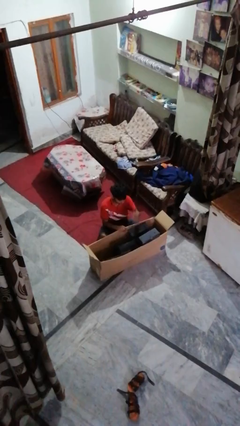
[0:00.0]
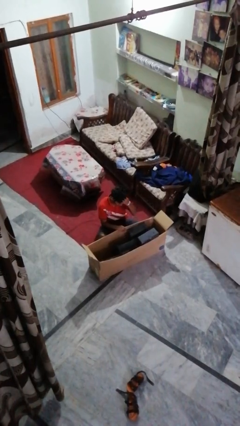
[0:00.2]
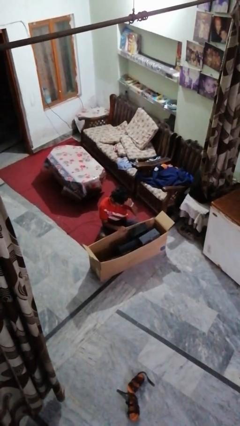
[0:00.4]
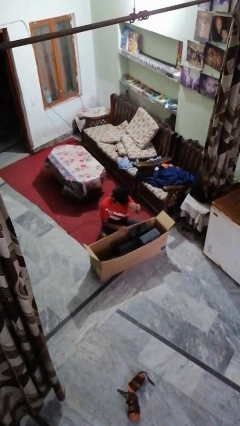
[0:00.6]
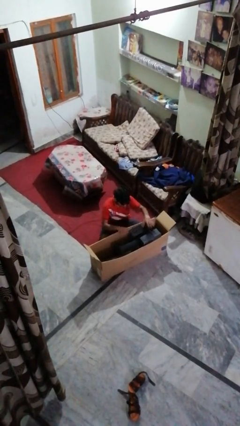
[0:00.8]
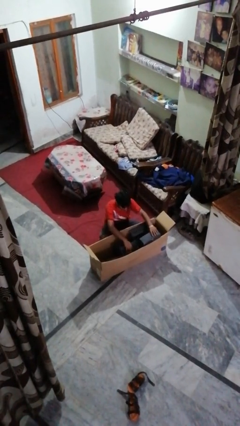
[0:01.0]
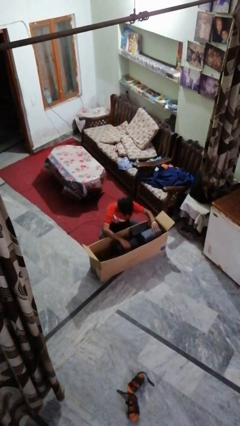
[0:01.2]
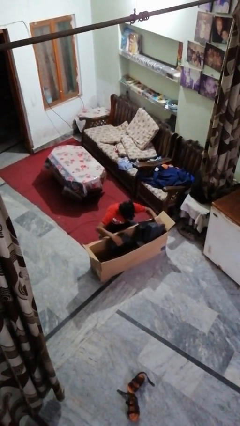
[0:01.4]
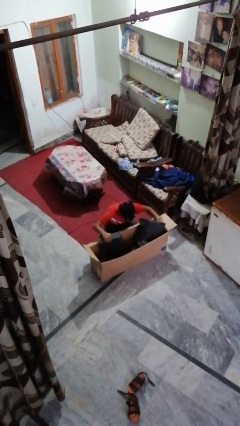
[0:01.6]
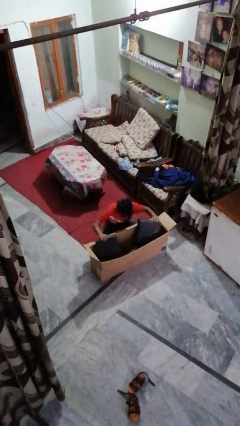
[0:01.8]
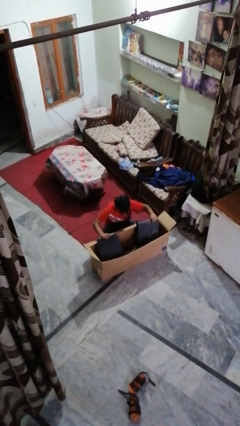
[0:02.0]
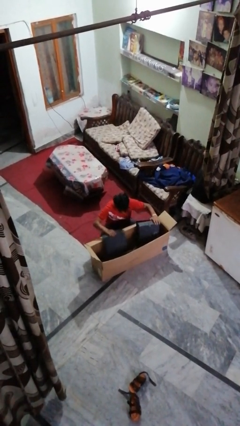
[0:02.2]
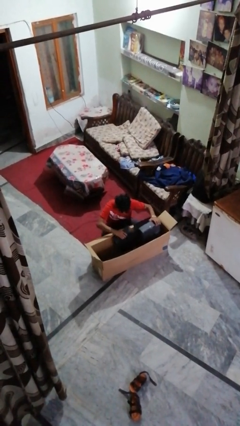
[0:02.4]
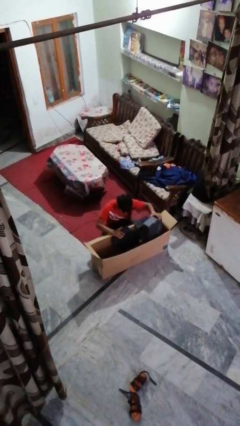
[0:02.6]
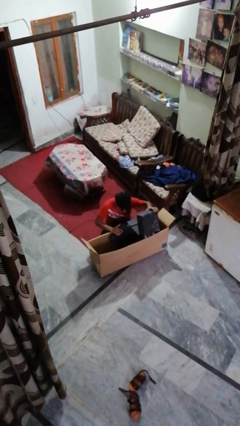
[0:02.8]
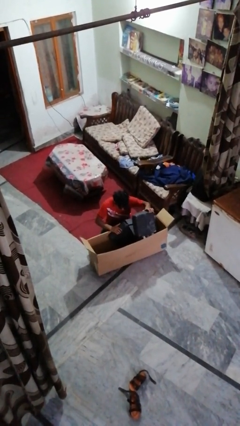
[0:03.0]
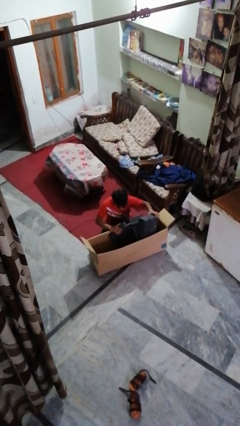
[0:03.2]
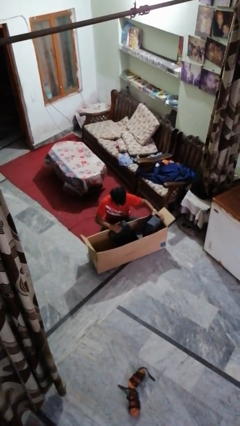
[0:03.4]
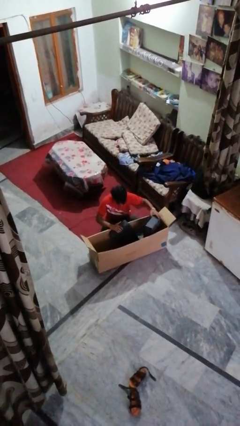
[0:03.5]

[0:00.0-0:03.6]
person searches in box

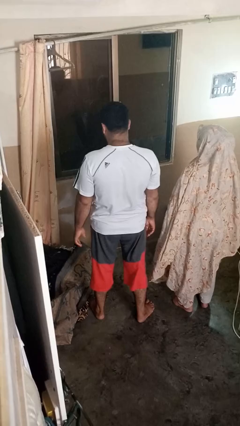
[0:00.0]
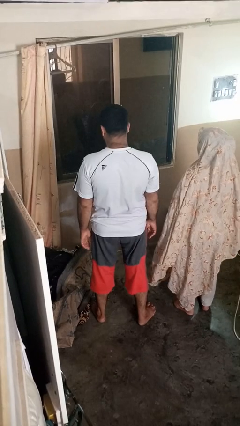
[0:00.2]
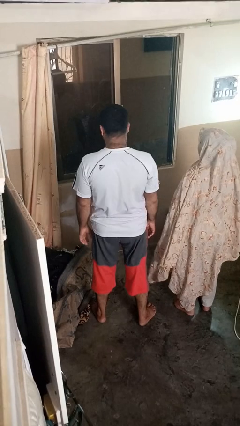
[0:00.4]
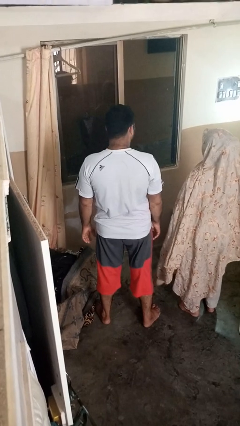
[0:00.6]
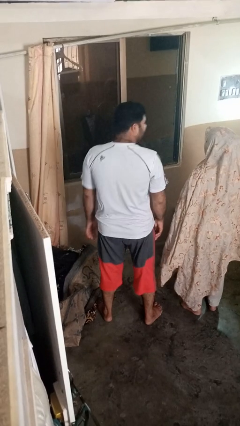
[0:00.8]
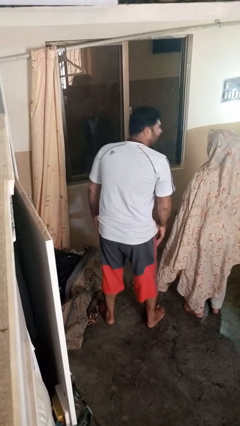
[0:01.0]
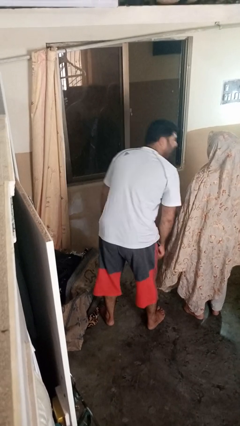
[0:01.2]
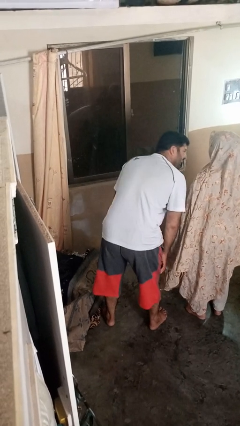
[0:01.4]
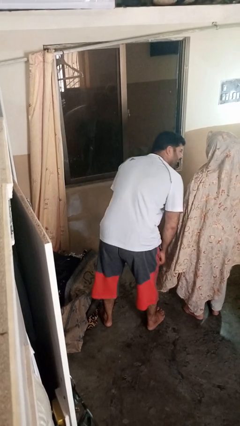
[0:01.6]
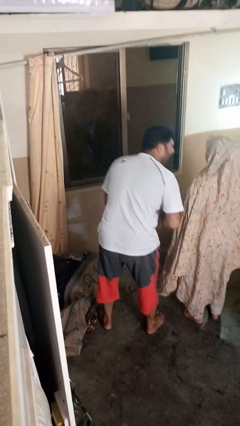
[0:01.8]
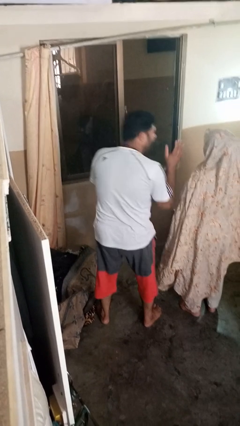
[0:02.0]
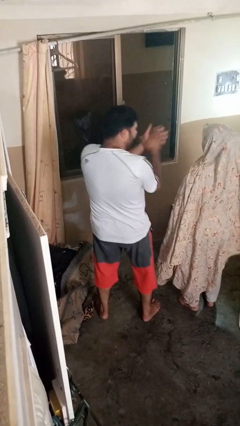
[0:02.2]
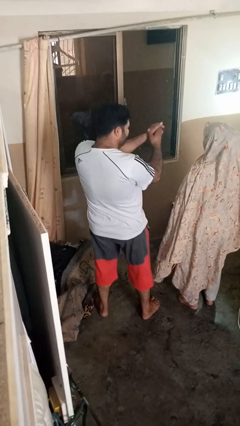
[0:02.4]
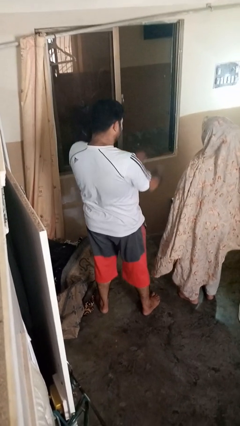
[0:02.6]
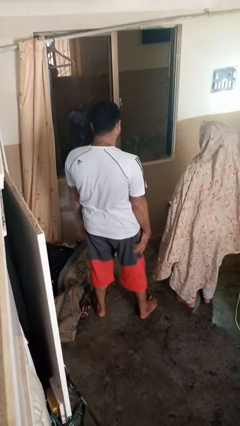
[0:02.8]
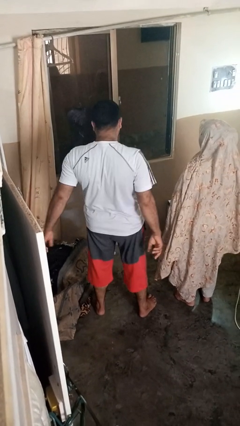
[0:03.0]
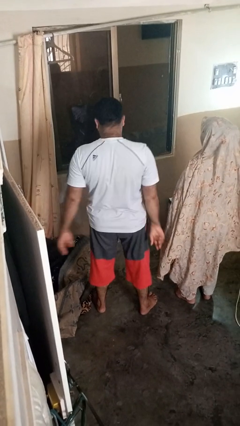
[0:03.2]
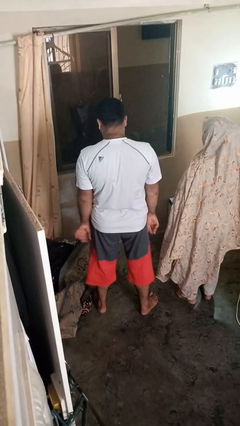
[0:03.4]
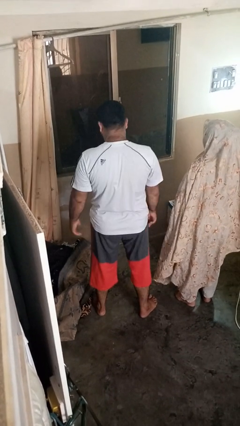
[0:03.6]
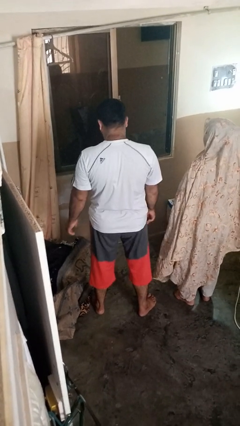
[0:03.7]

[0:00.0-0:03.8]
person laughs with person

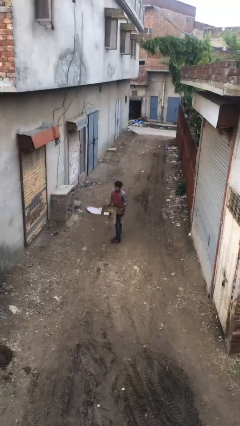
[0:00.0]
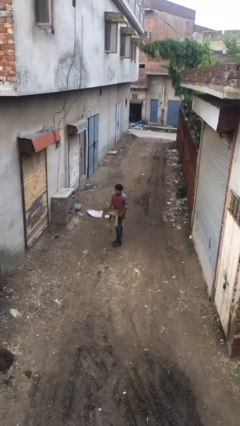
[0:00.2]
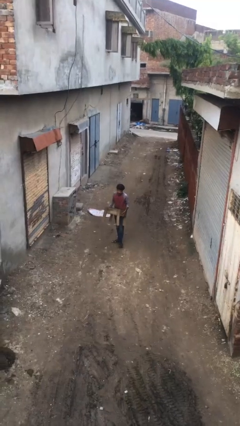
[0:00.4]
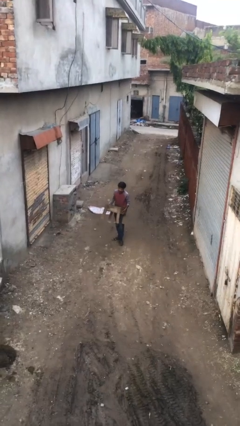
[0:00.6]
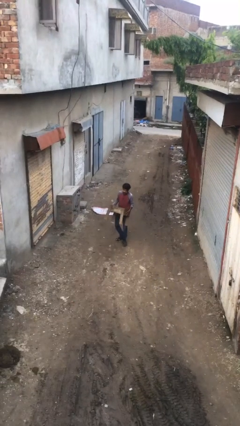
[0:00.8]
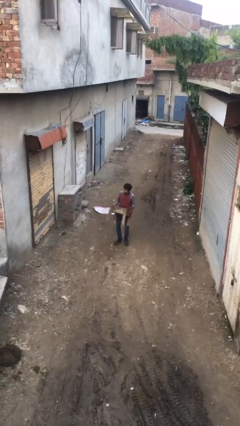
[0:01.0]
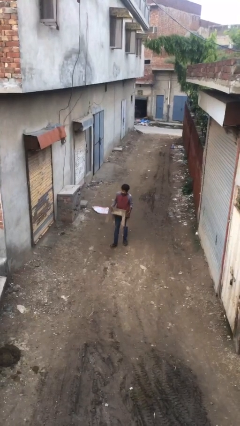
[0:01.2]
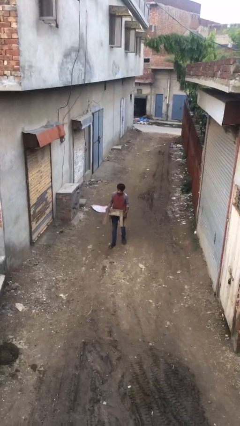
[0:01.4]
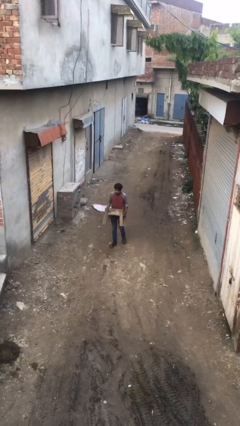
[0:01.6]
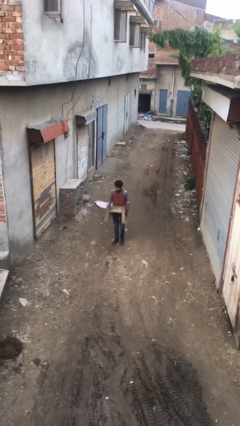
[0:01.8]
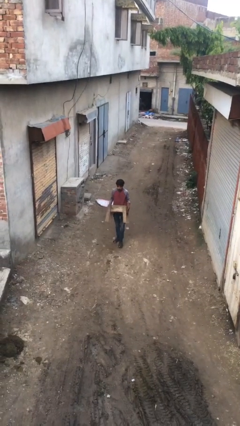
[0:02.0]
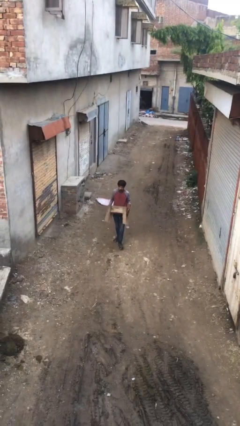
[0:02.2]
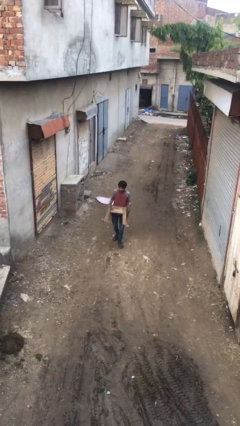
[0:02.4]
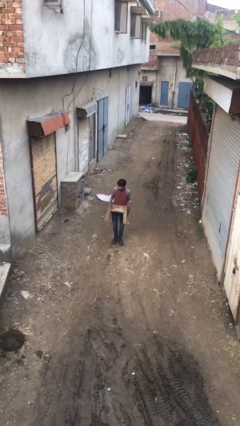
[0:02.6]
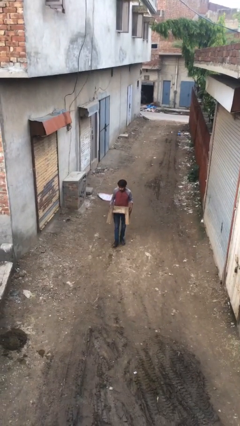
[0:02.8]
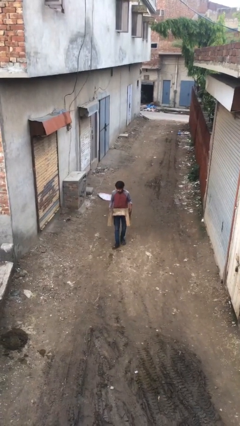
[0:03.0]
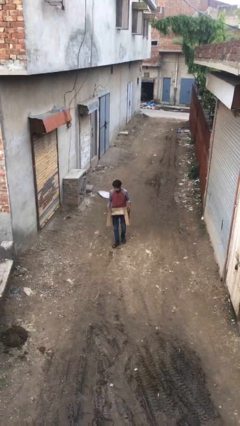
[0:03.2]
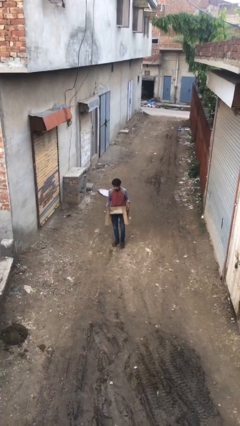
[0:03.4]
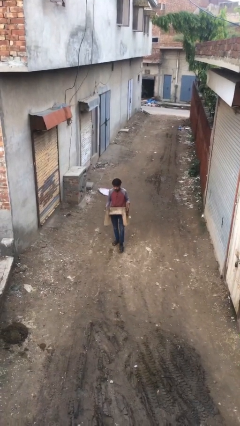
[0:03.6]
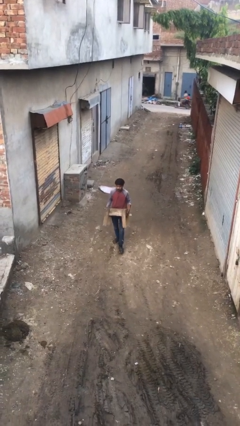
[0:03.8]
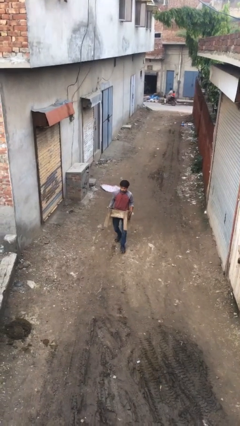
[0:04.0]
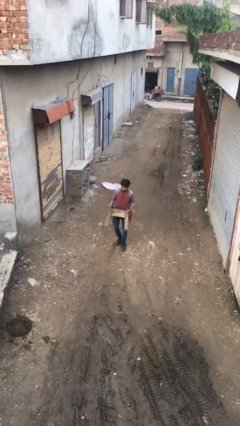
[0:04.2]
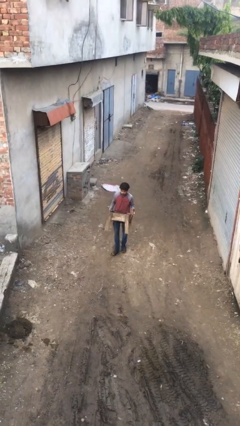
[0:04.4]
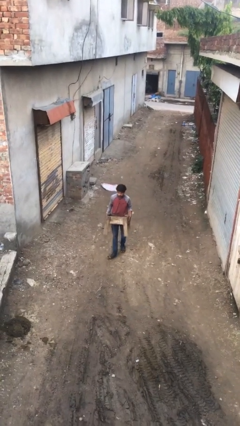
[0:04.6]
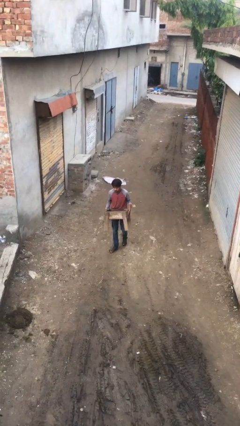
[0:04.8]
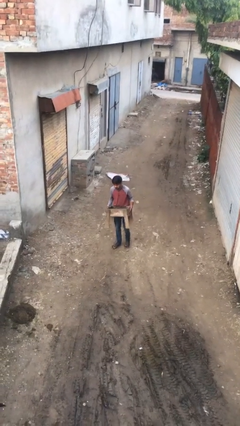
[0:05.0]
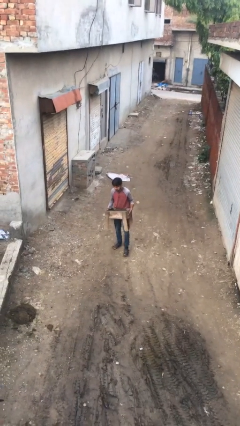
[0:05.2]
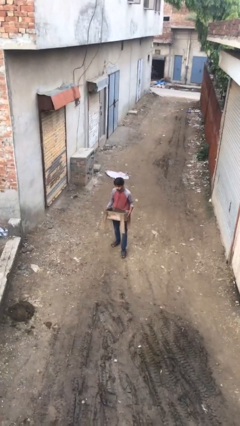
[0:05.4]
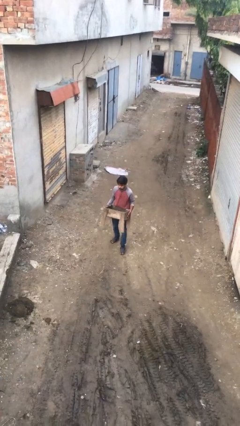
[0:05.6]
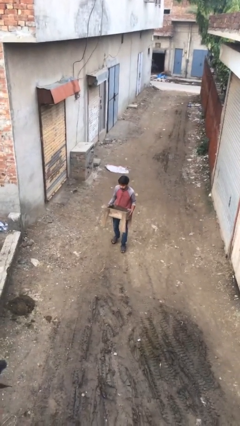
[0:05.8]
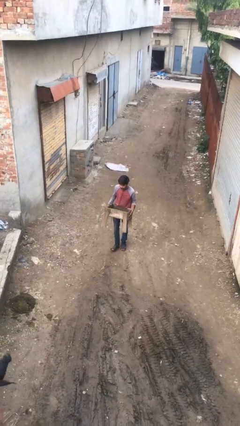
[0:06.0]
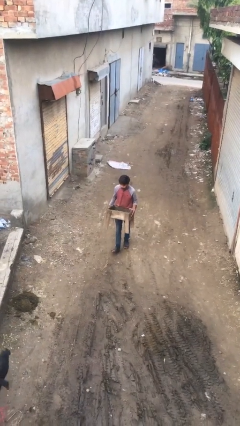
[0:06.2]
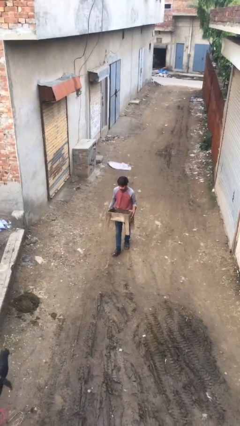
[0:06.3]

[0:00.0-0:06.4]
person carries heavy object

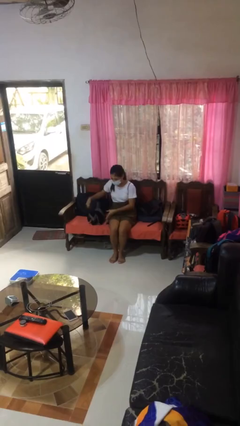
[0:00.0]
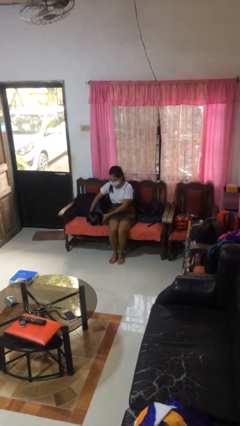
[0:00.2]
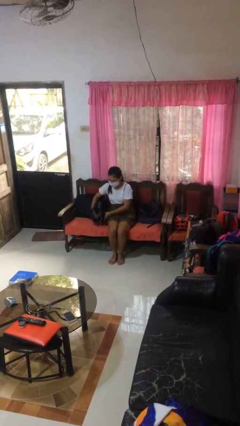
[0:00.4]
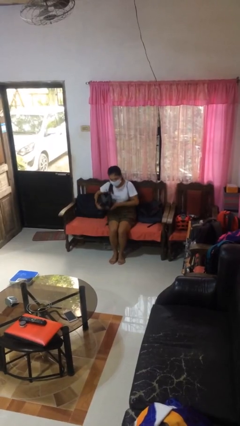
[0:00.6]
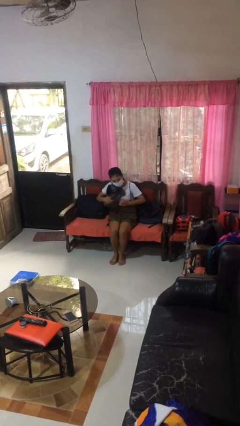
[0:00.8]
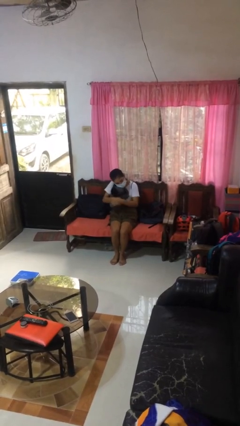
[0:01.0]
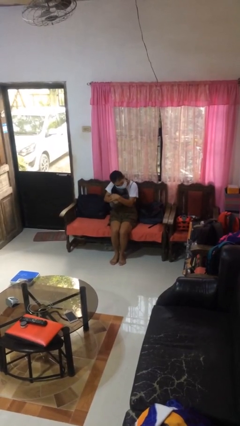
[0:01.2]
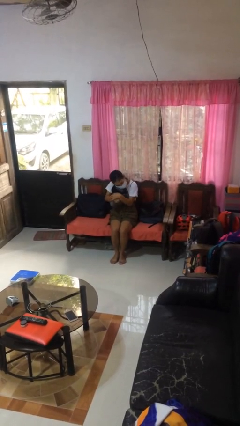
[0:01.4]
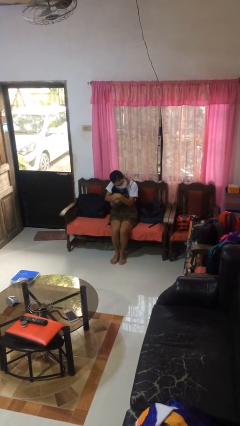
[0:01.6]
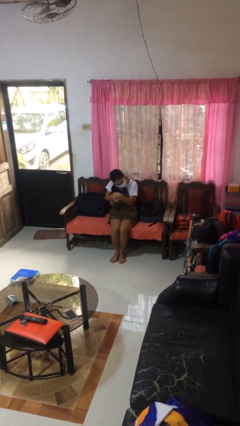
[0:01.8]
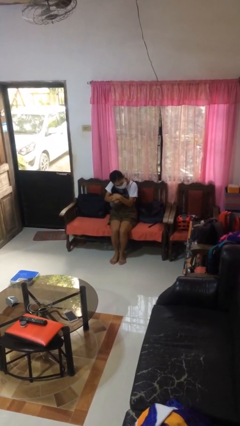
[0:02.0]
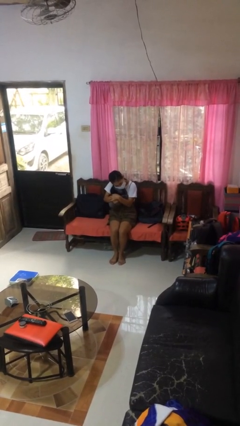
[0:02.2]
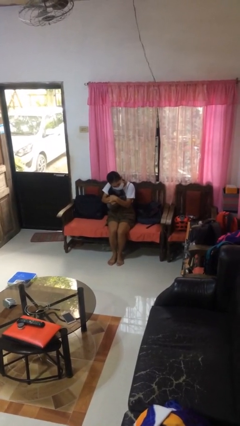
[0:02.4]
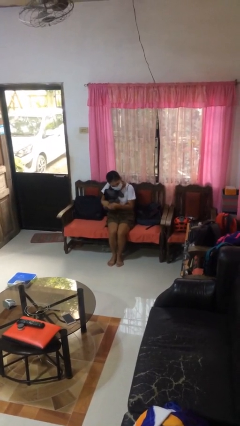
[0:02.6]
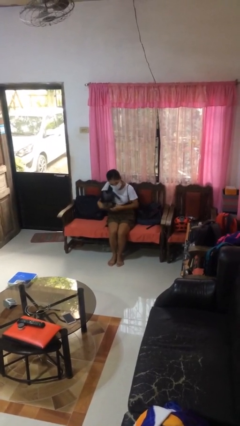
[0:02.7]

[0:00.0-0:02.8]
person hugs stuffed animal

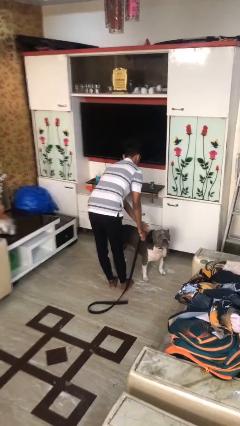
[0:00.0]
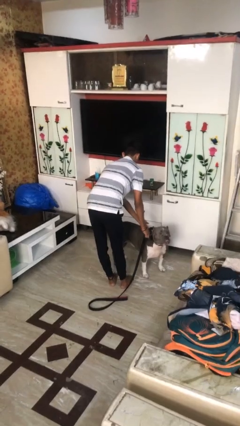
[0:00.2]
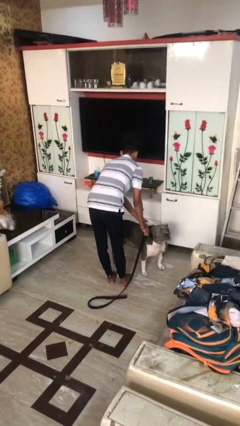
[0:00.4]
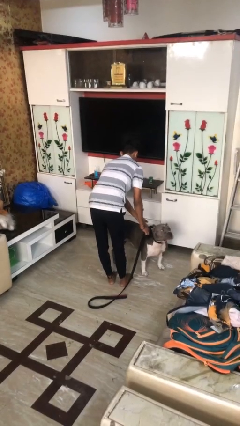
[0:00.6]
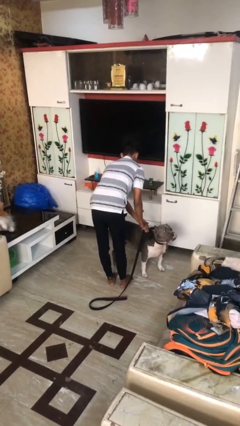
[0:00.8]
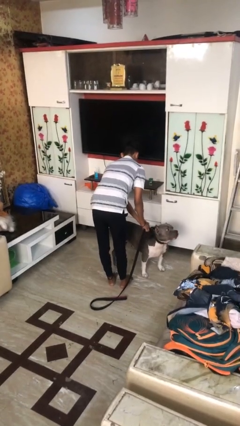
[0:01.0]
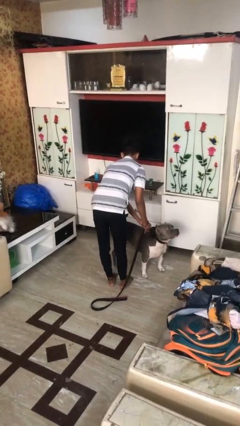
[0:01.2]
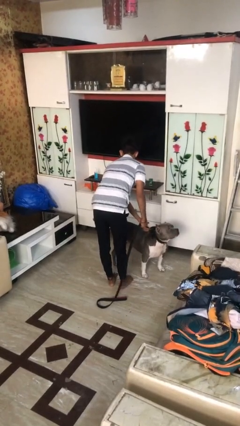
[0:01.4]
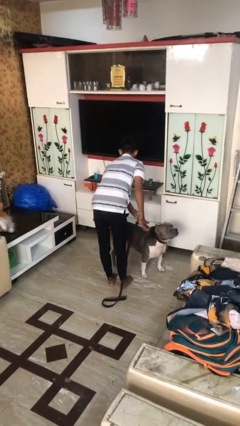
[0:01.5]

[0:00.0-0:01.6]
person attaches leash to dog
